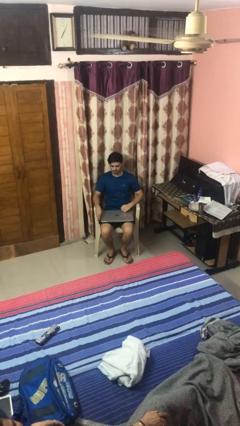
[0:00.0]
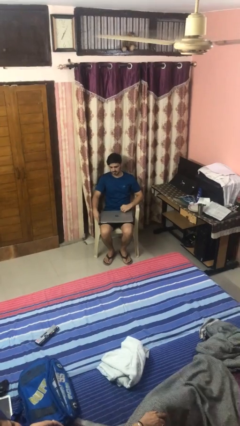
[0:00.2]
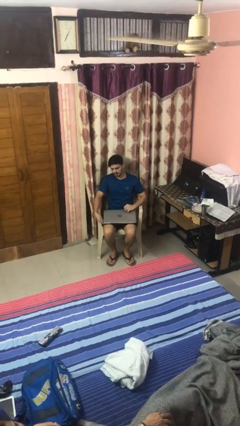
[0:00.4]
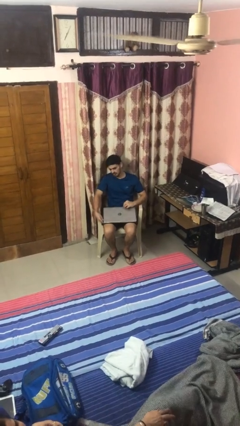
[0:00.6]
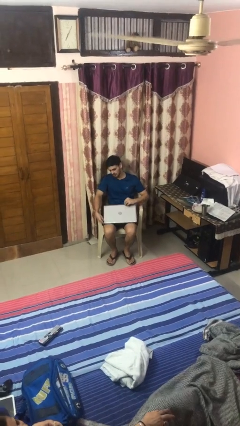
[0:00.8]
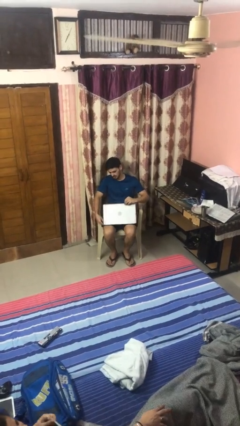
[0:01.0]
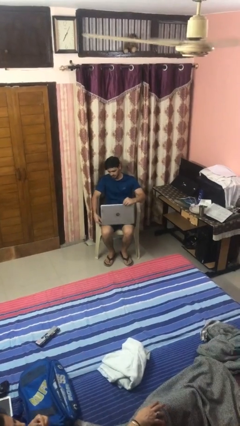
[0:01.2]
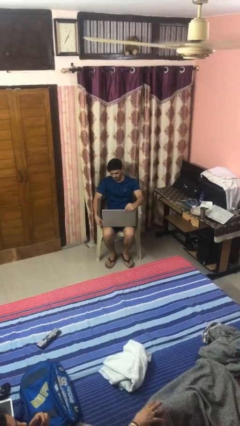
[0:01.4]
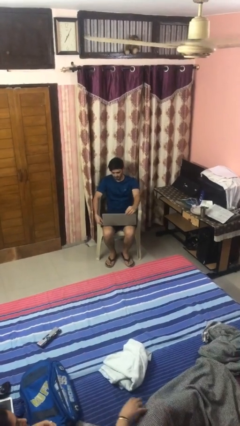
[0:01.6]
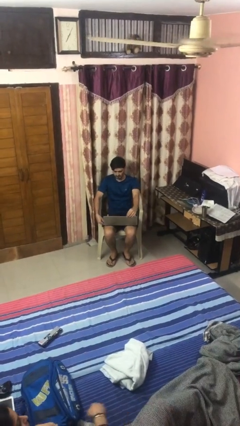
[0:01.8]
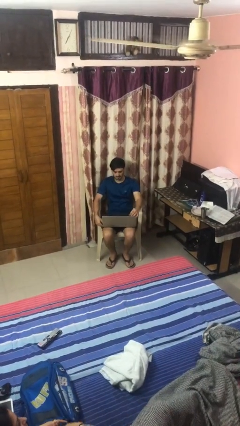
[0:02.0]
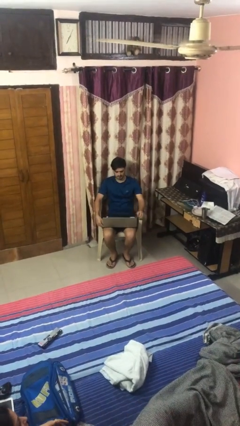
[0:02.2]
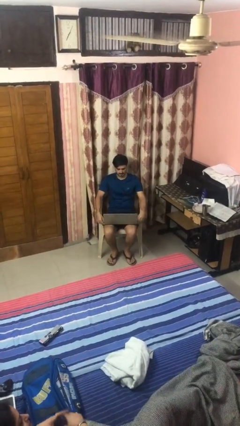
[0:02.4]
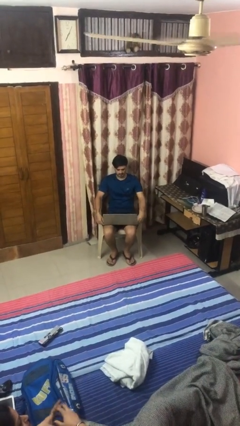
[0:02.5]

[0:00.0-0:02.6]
person opens laptop

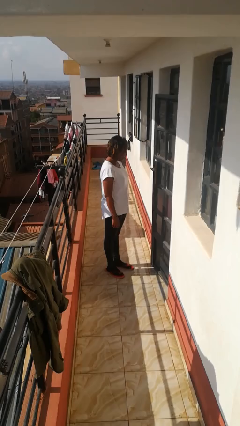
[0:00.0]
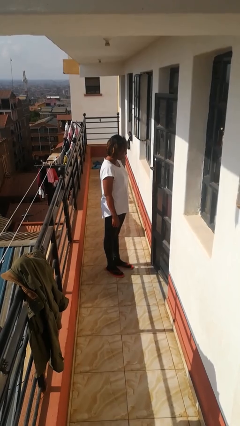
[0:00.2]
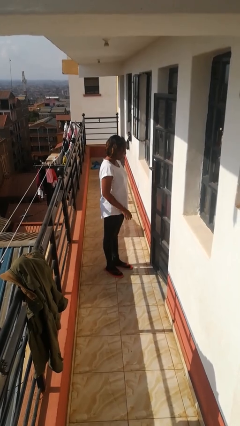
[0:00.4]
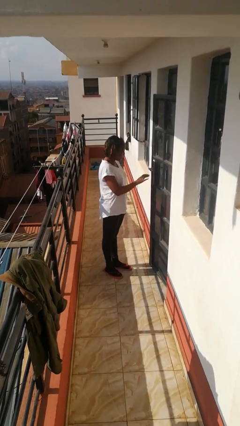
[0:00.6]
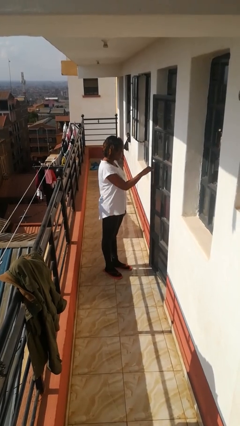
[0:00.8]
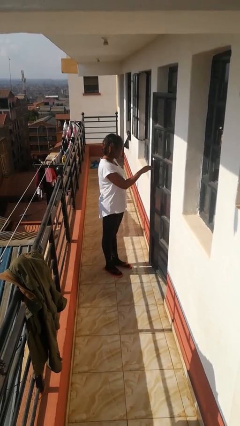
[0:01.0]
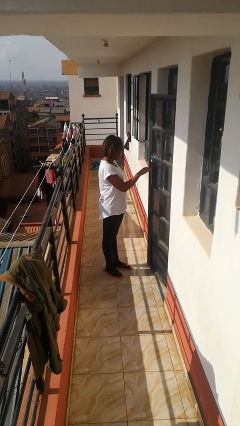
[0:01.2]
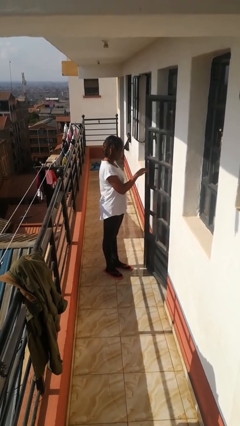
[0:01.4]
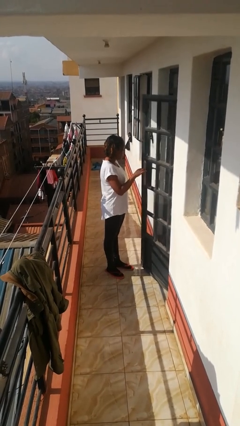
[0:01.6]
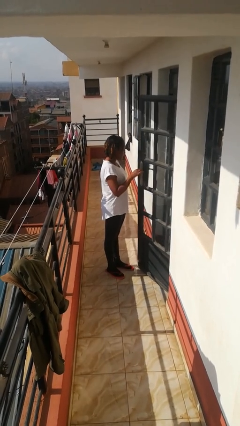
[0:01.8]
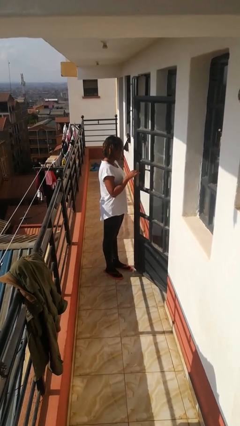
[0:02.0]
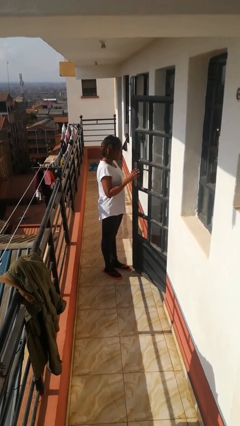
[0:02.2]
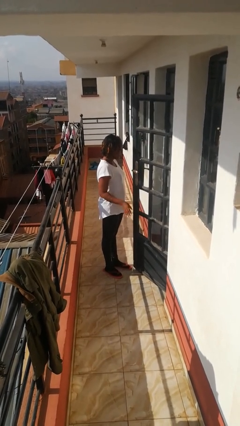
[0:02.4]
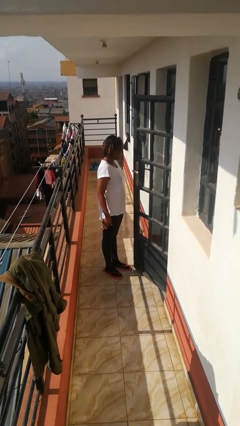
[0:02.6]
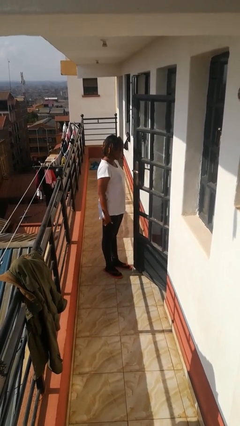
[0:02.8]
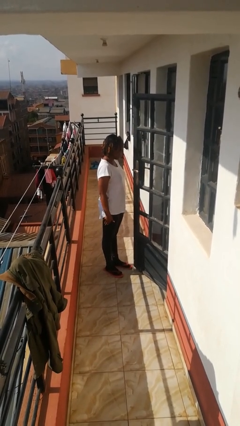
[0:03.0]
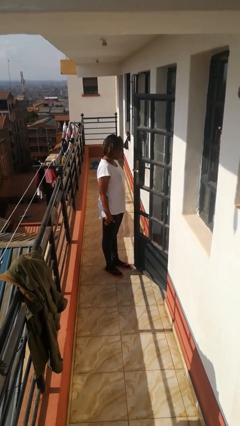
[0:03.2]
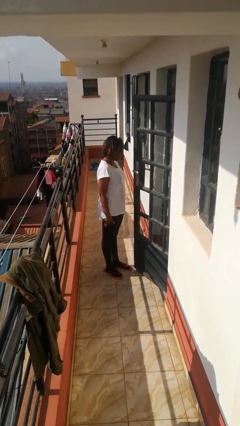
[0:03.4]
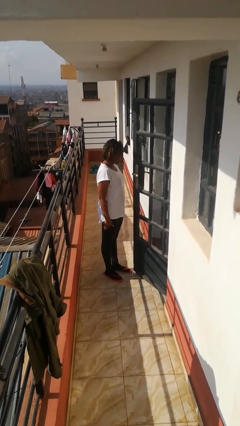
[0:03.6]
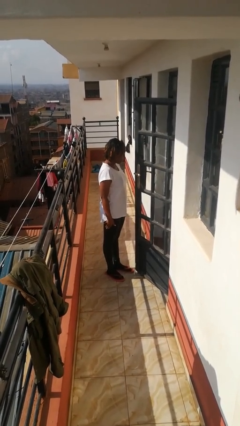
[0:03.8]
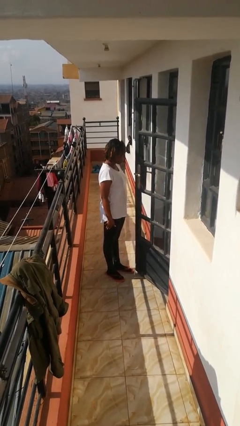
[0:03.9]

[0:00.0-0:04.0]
person opens facility door

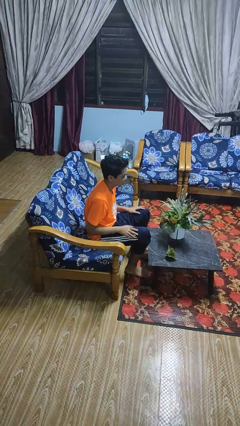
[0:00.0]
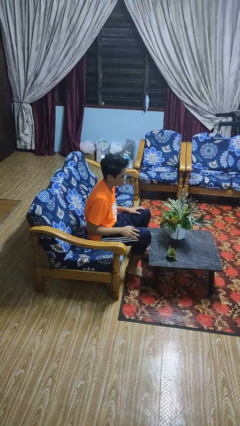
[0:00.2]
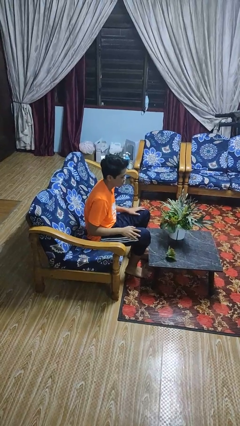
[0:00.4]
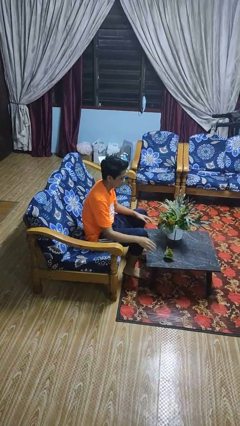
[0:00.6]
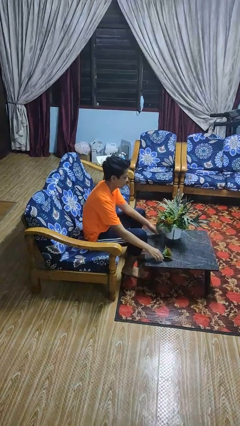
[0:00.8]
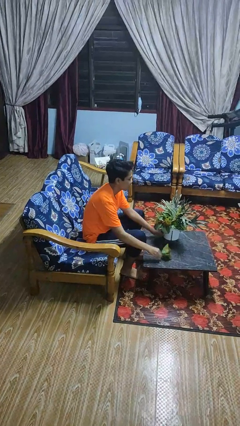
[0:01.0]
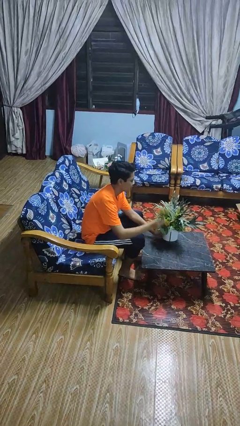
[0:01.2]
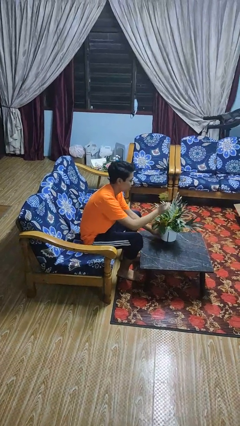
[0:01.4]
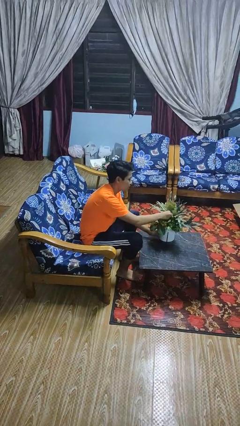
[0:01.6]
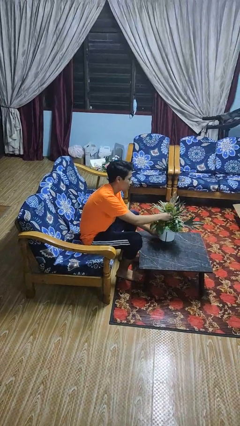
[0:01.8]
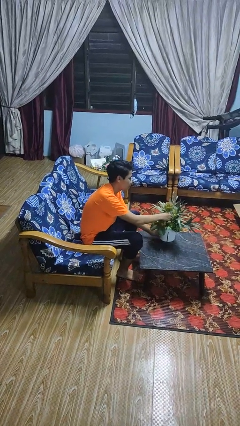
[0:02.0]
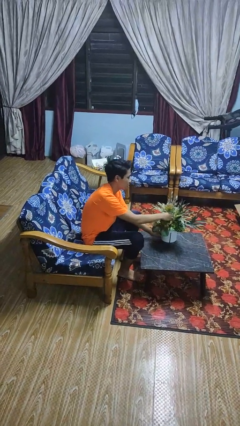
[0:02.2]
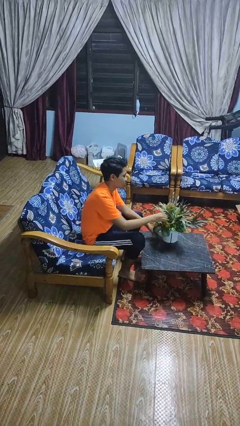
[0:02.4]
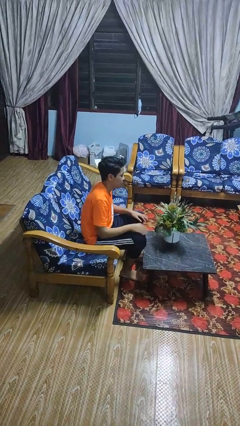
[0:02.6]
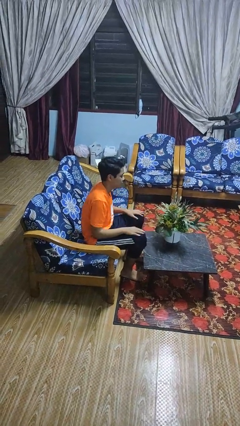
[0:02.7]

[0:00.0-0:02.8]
person arranges flowers in vase

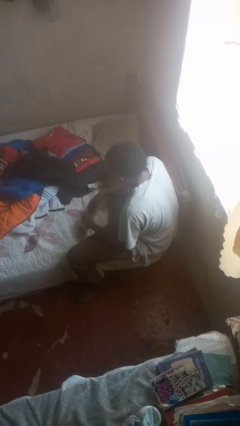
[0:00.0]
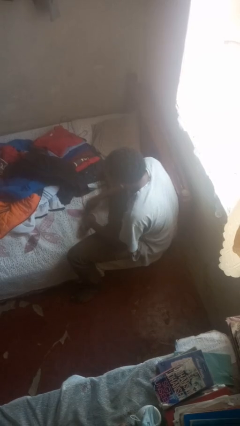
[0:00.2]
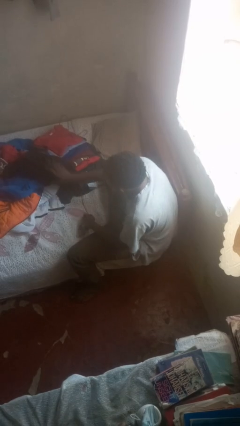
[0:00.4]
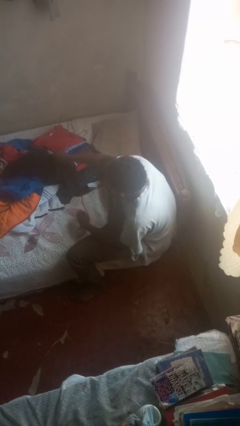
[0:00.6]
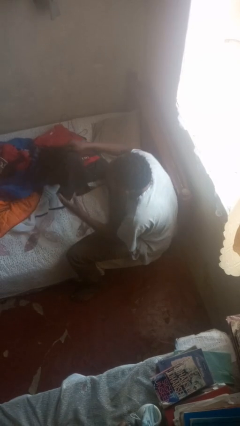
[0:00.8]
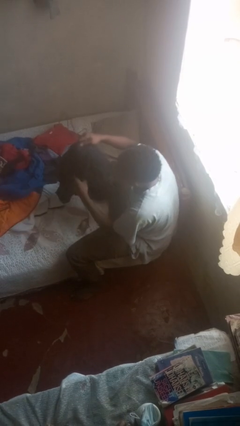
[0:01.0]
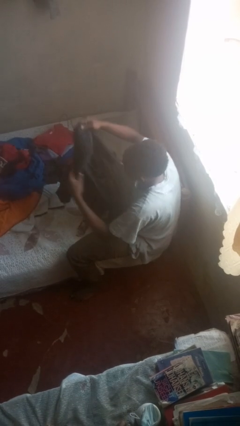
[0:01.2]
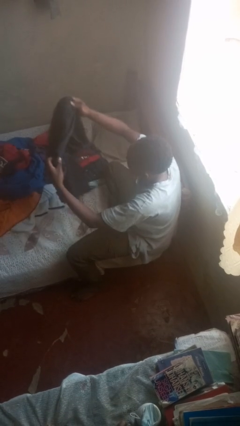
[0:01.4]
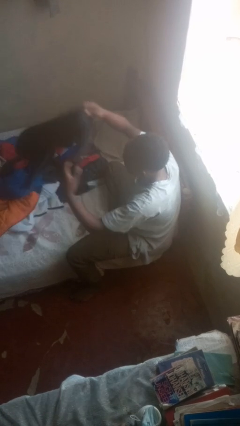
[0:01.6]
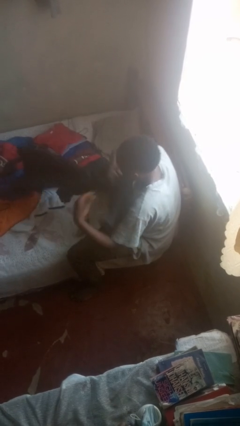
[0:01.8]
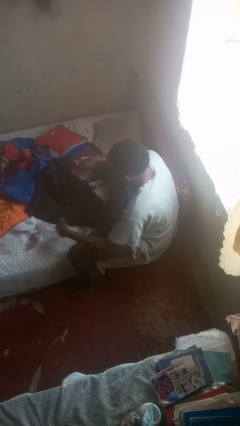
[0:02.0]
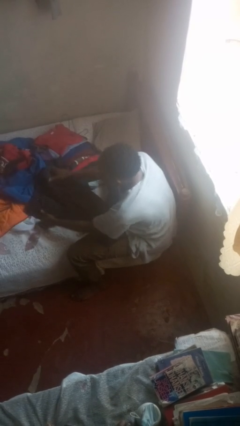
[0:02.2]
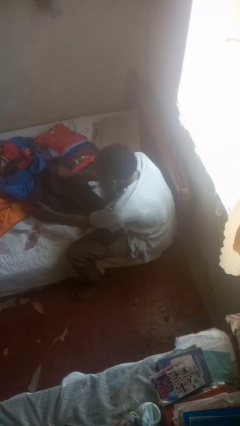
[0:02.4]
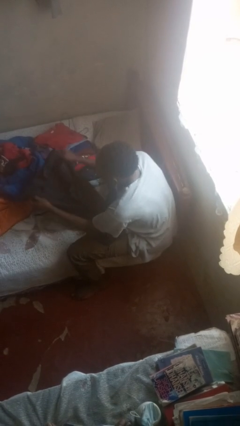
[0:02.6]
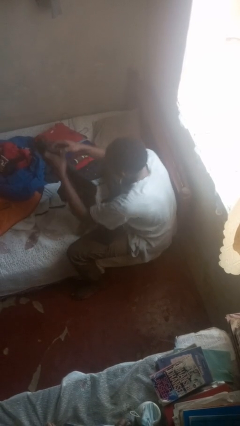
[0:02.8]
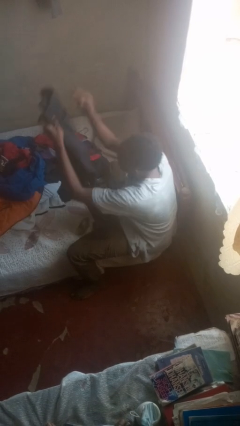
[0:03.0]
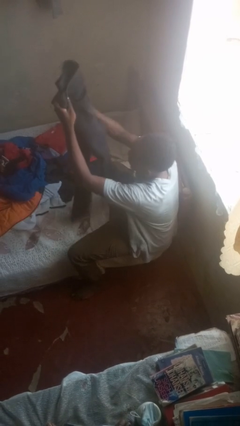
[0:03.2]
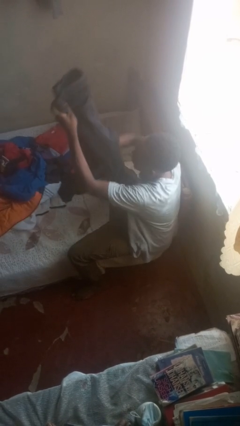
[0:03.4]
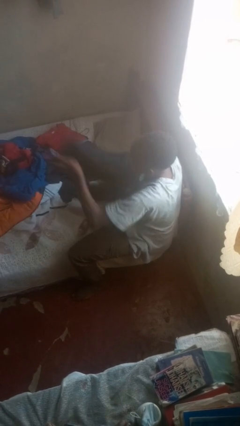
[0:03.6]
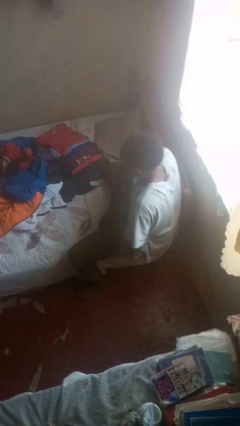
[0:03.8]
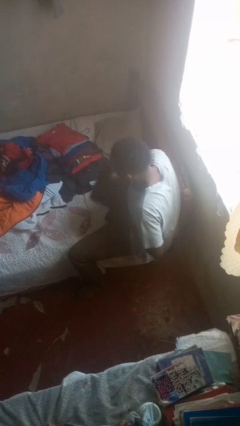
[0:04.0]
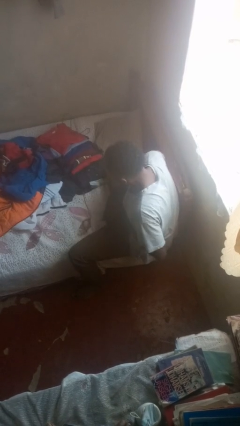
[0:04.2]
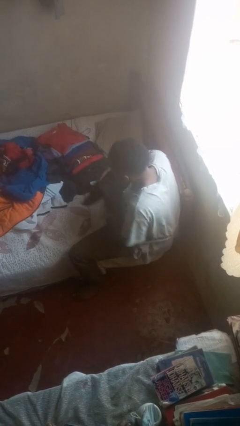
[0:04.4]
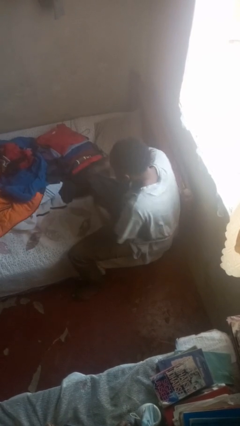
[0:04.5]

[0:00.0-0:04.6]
person folds pants

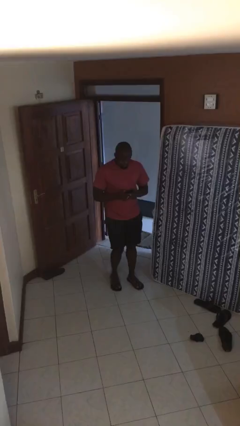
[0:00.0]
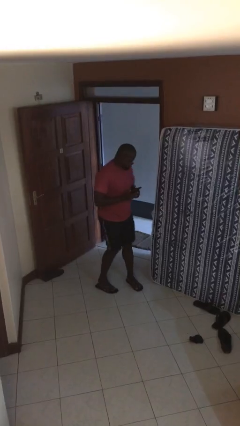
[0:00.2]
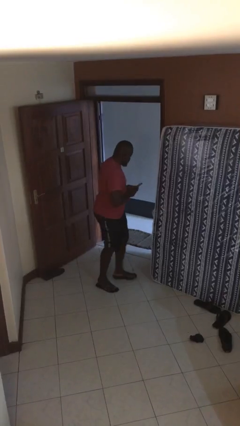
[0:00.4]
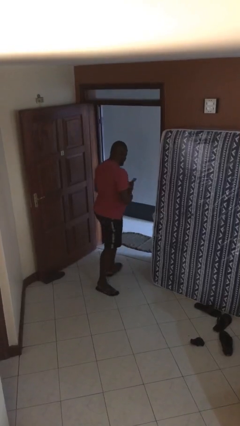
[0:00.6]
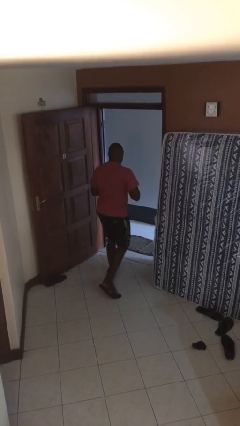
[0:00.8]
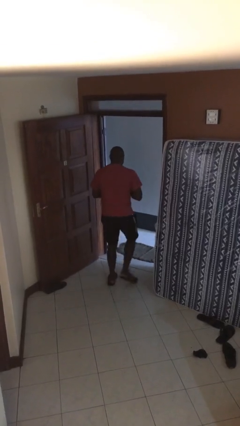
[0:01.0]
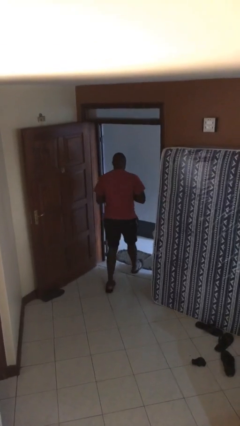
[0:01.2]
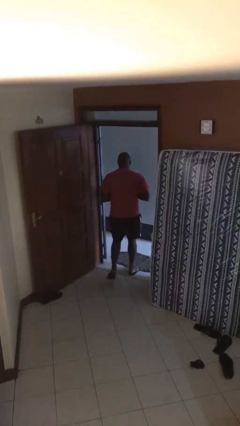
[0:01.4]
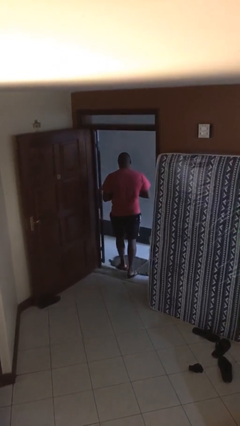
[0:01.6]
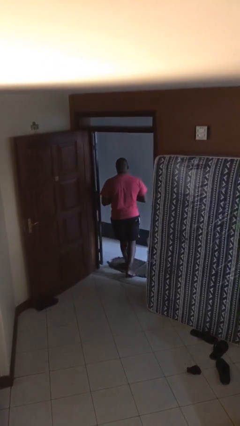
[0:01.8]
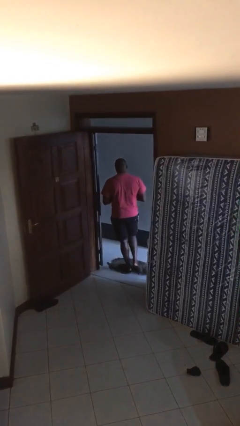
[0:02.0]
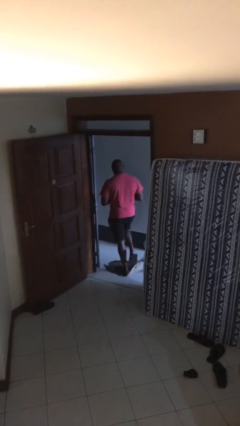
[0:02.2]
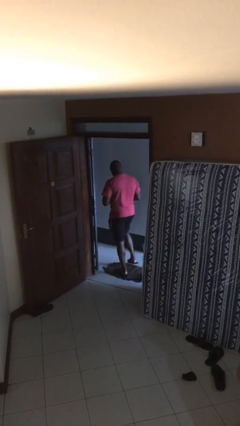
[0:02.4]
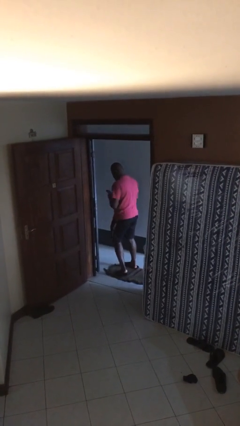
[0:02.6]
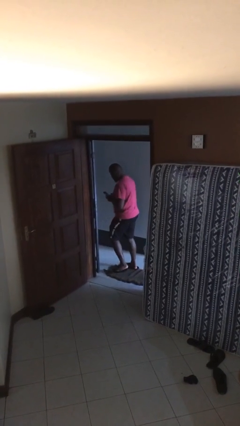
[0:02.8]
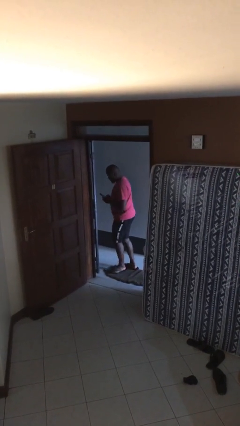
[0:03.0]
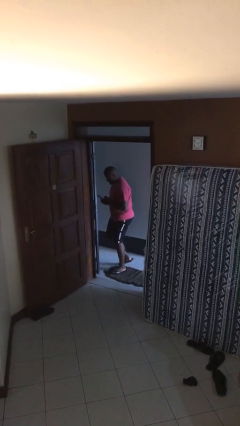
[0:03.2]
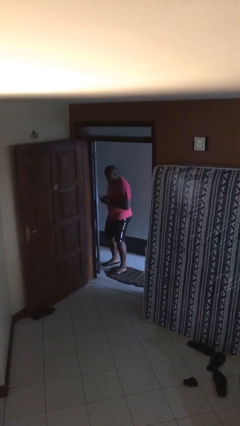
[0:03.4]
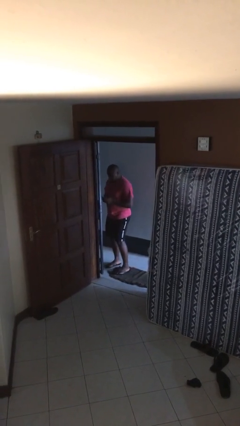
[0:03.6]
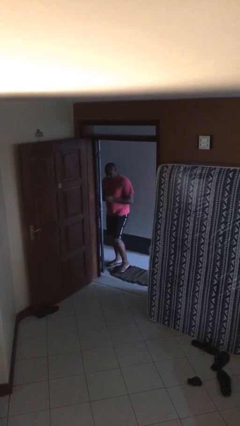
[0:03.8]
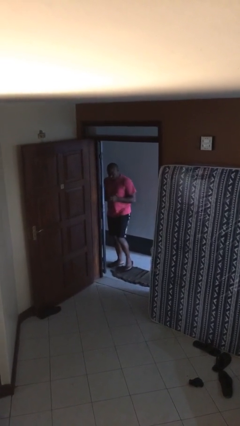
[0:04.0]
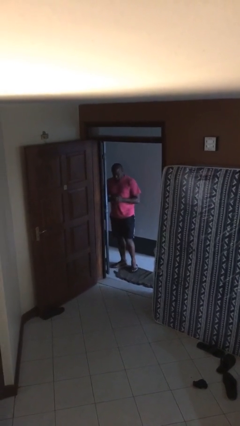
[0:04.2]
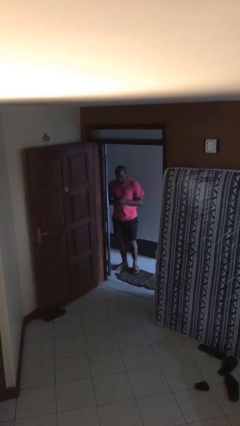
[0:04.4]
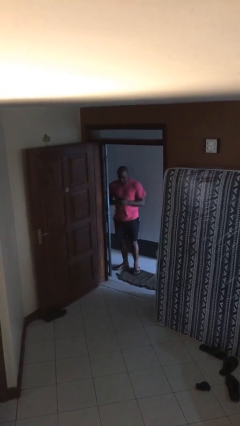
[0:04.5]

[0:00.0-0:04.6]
person exits scene through structure
